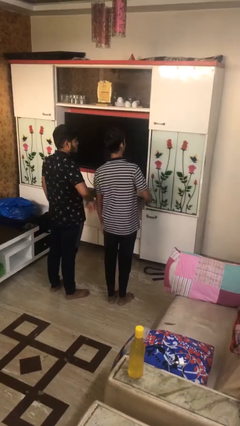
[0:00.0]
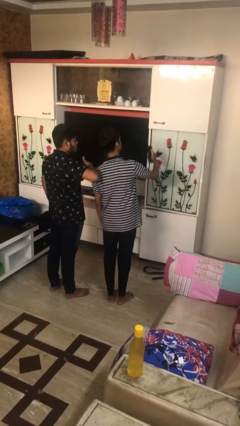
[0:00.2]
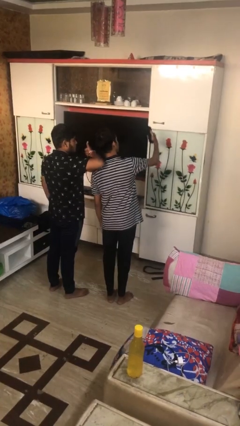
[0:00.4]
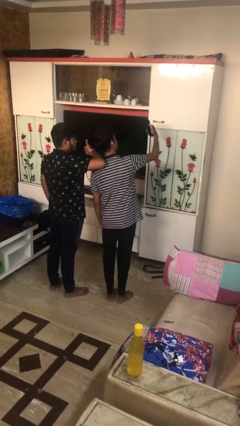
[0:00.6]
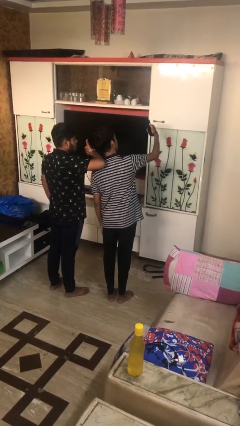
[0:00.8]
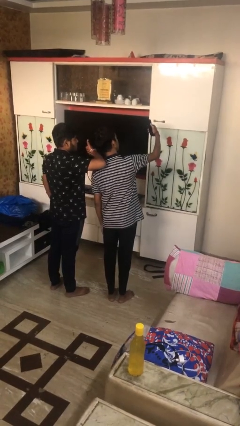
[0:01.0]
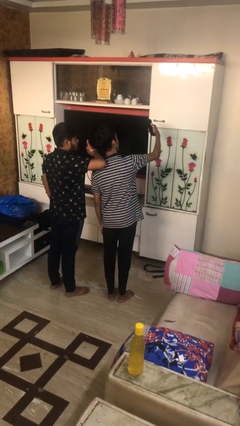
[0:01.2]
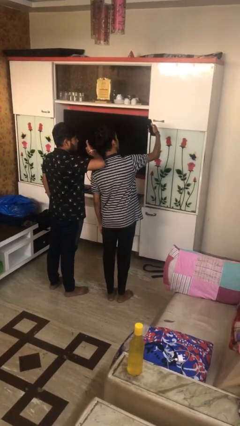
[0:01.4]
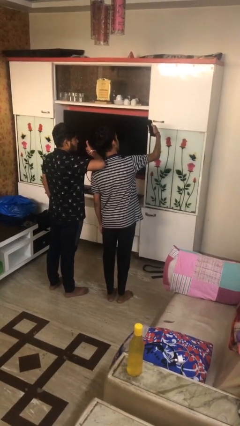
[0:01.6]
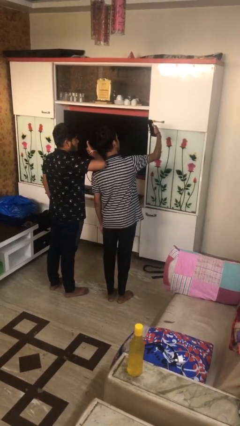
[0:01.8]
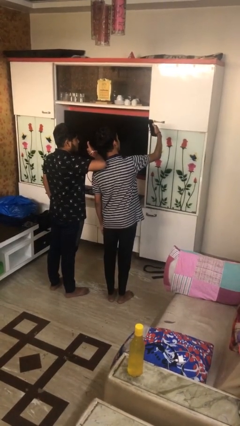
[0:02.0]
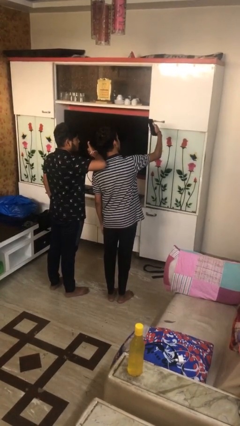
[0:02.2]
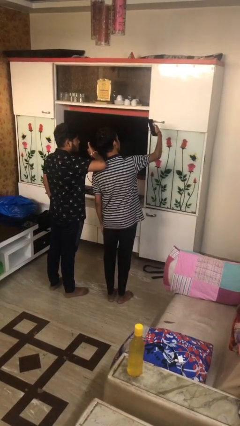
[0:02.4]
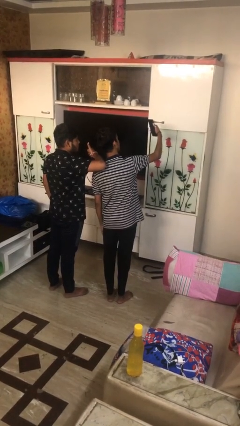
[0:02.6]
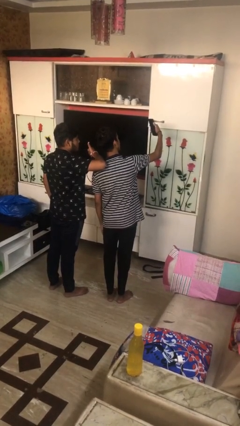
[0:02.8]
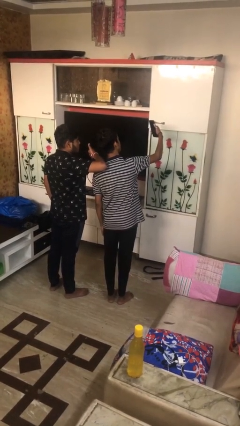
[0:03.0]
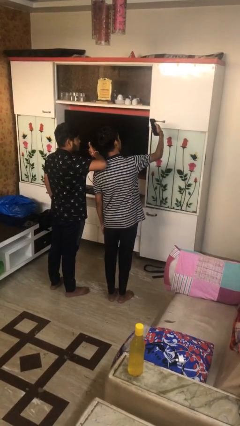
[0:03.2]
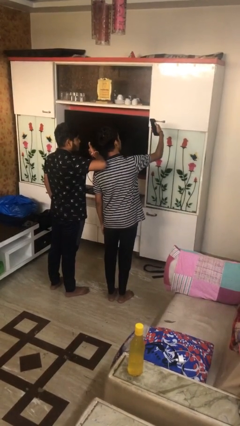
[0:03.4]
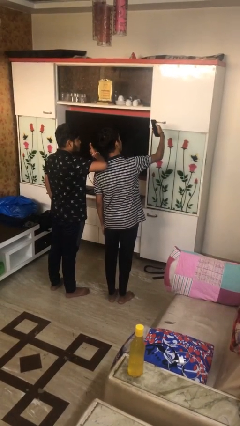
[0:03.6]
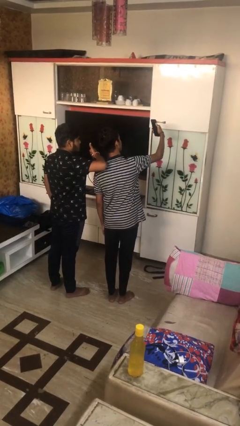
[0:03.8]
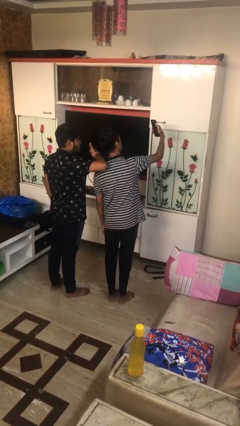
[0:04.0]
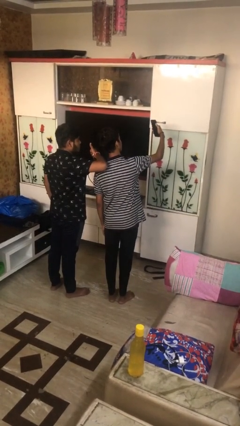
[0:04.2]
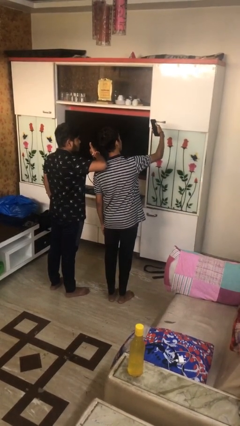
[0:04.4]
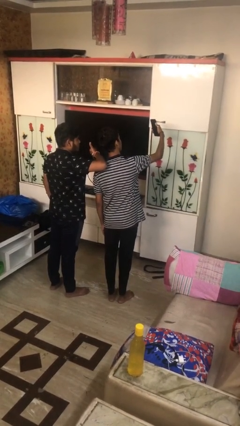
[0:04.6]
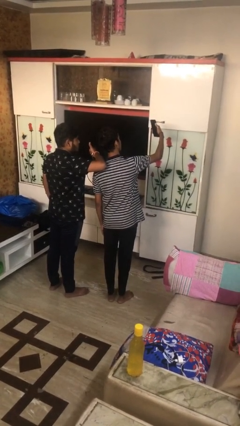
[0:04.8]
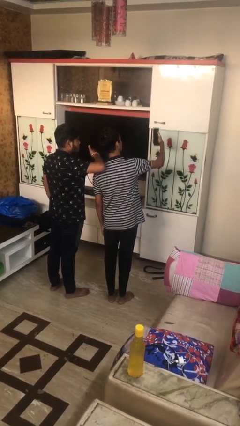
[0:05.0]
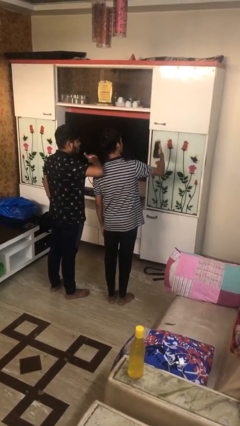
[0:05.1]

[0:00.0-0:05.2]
person takes selfie with person

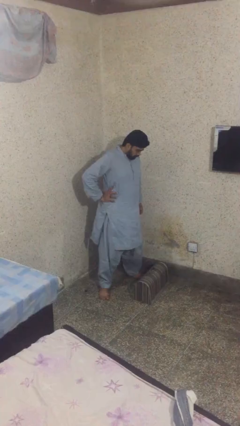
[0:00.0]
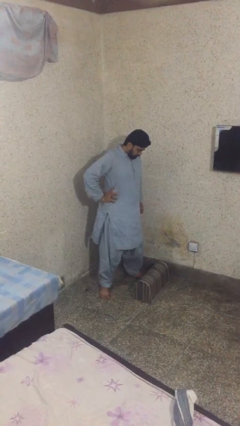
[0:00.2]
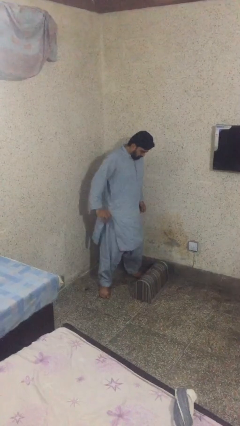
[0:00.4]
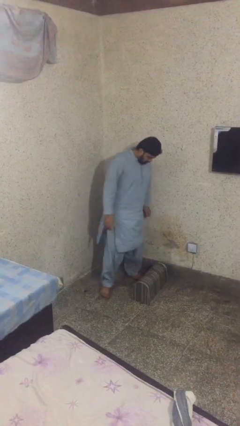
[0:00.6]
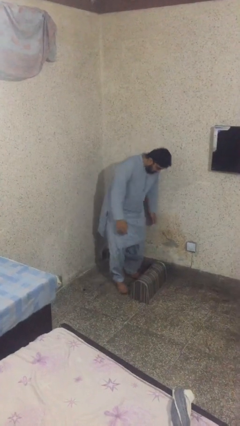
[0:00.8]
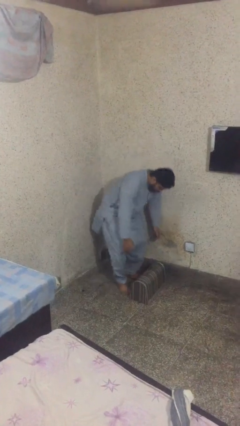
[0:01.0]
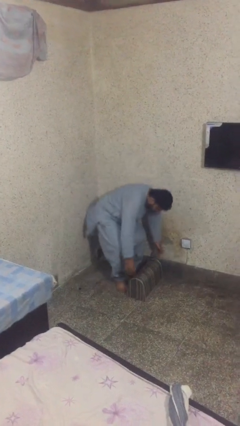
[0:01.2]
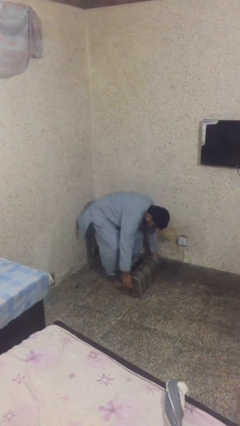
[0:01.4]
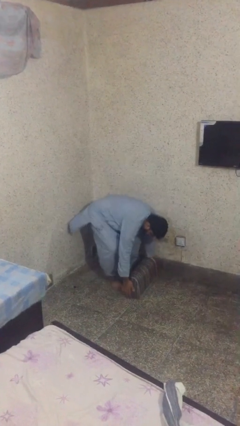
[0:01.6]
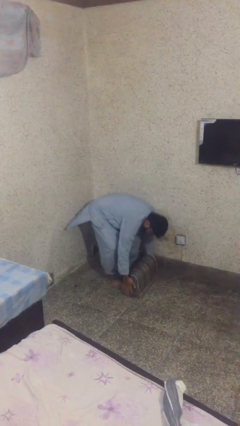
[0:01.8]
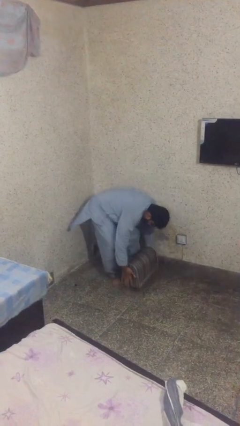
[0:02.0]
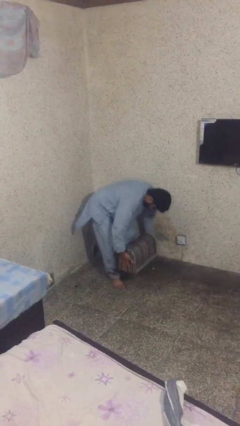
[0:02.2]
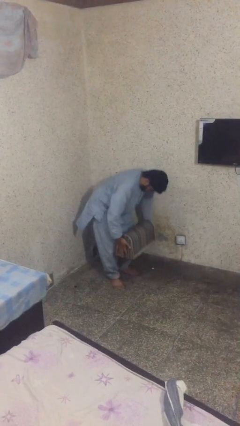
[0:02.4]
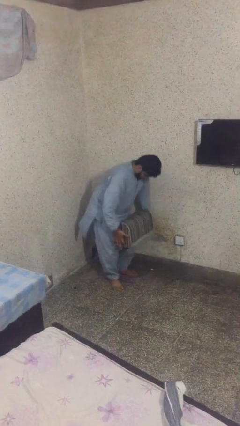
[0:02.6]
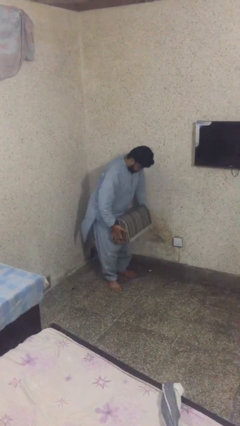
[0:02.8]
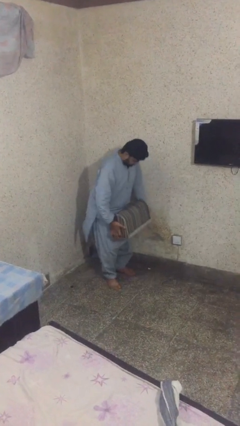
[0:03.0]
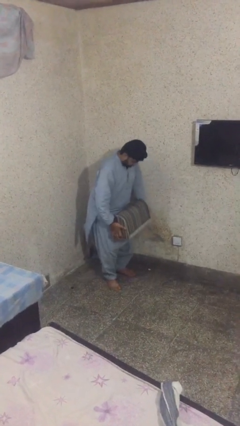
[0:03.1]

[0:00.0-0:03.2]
person picks up object from floor

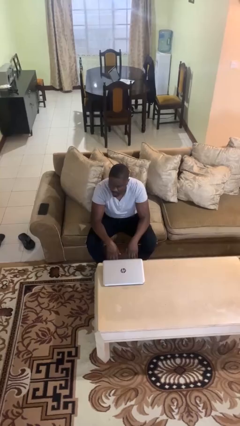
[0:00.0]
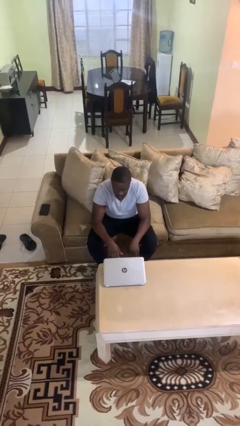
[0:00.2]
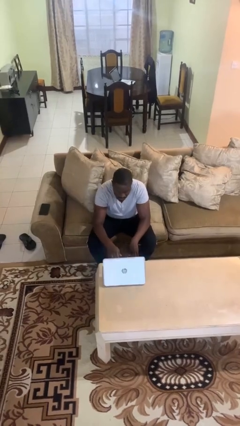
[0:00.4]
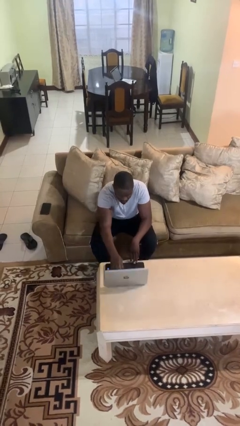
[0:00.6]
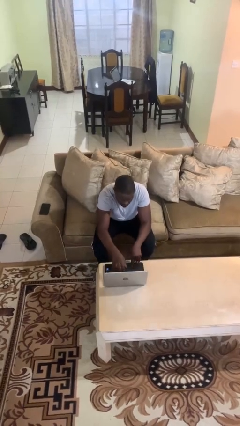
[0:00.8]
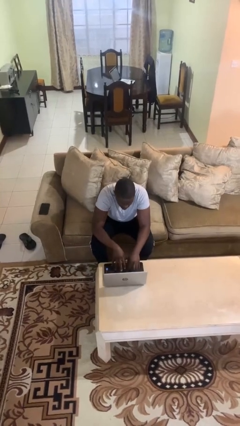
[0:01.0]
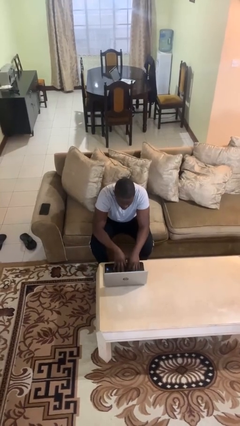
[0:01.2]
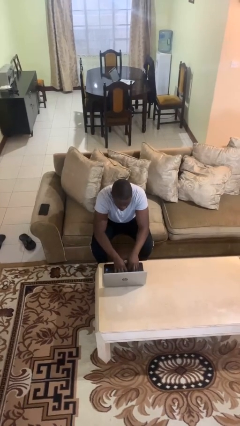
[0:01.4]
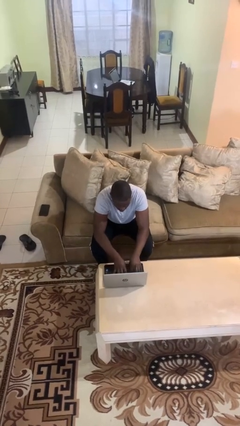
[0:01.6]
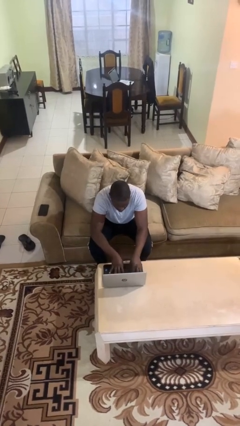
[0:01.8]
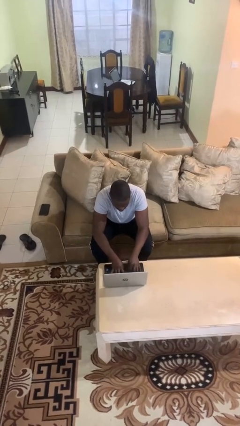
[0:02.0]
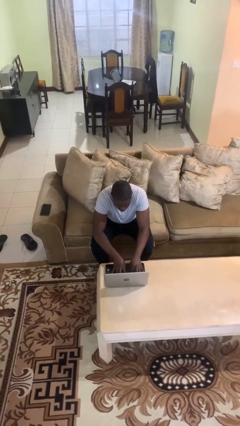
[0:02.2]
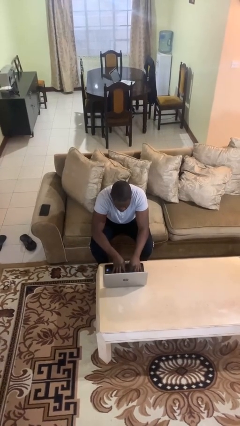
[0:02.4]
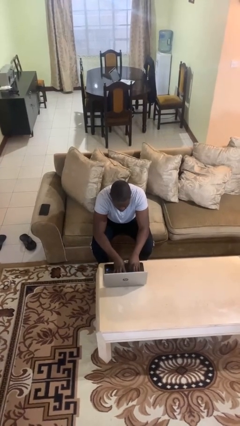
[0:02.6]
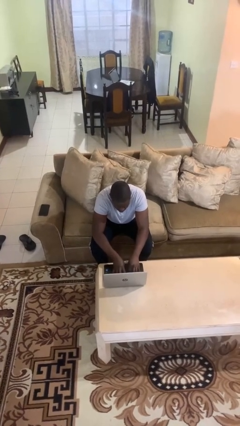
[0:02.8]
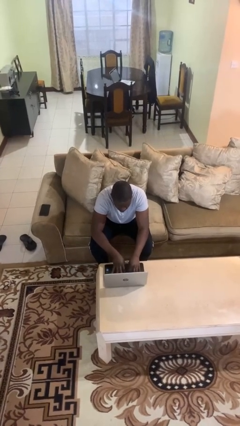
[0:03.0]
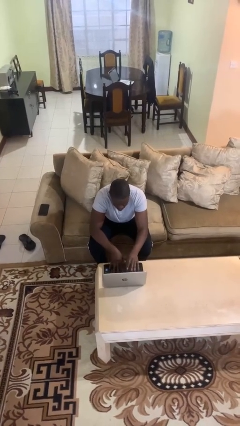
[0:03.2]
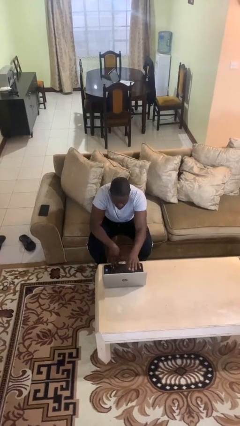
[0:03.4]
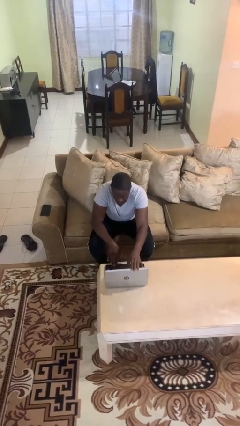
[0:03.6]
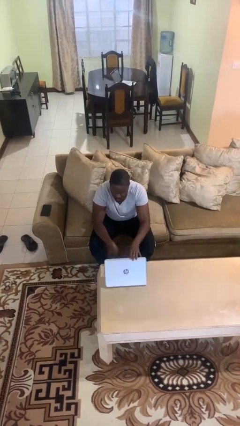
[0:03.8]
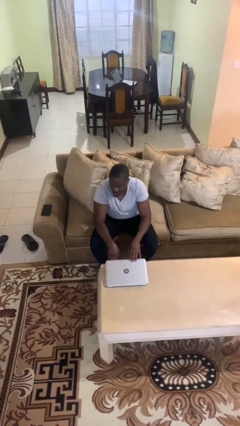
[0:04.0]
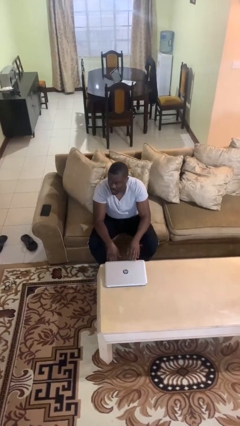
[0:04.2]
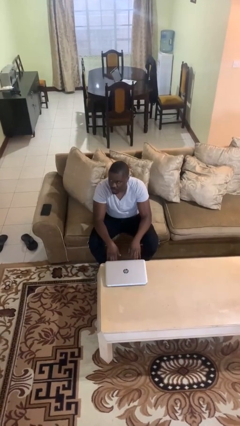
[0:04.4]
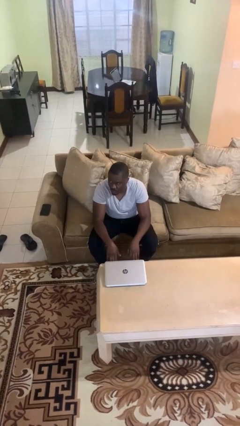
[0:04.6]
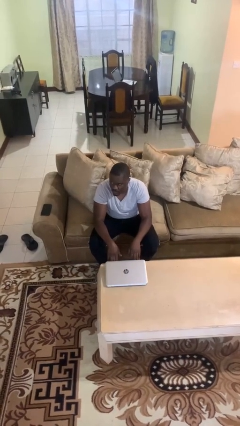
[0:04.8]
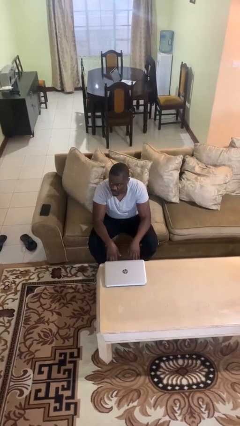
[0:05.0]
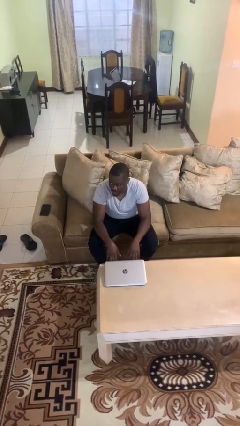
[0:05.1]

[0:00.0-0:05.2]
person interacts with laptop

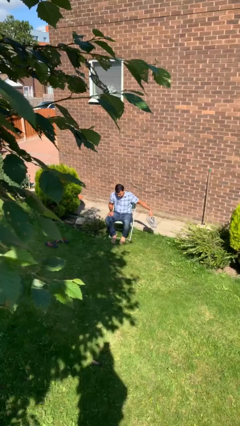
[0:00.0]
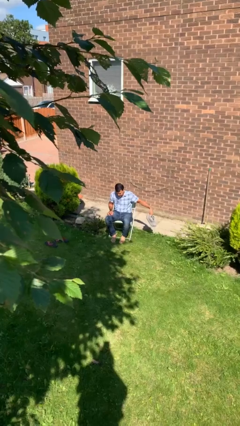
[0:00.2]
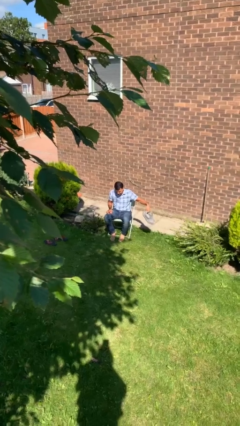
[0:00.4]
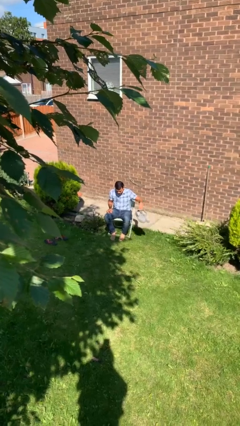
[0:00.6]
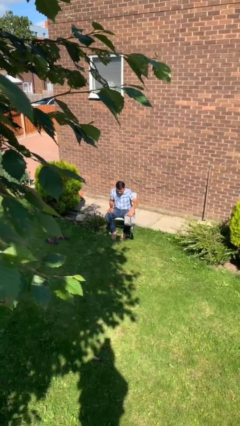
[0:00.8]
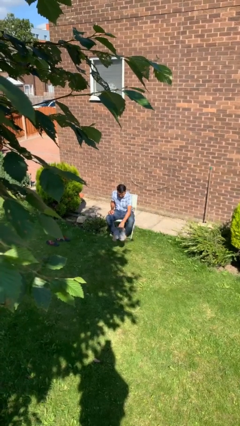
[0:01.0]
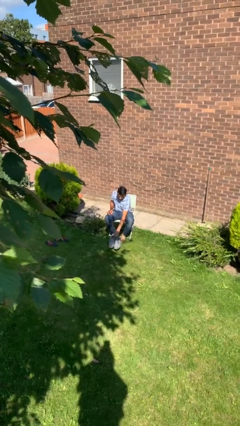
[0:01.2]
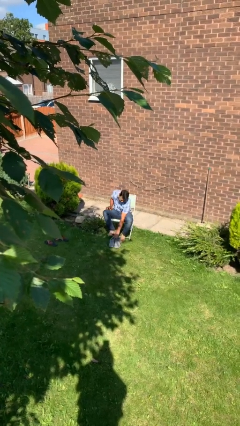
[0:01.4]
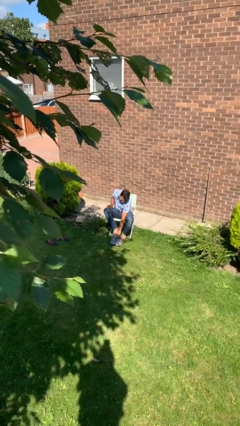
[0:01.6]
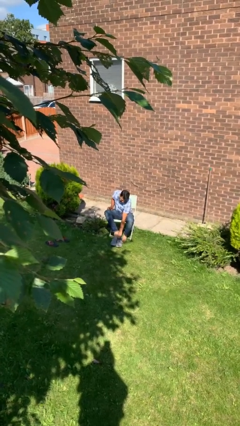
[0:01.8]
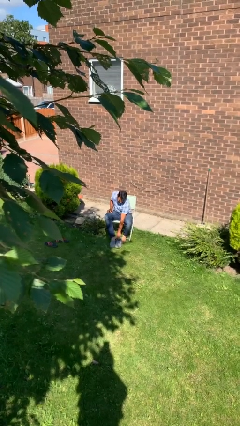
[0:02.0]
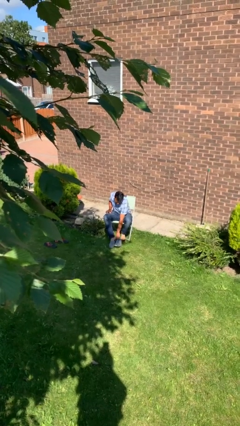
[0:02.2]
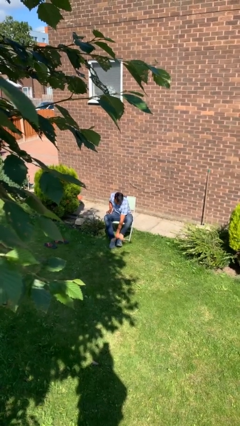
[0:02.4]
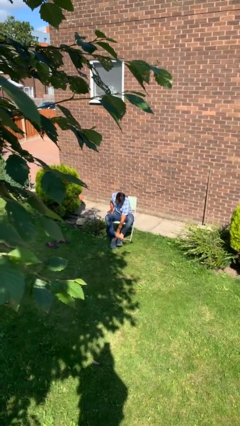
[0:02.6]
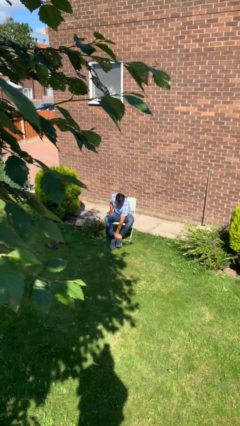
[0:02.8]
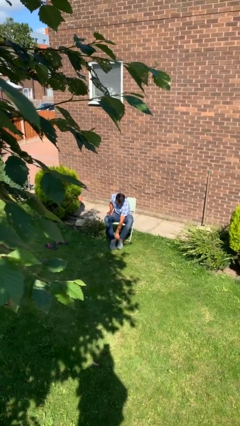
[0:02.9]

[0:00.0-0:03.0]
person puts on shoes

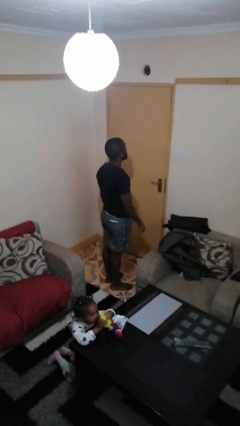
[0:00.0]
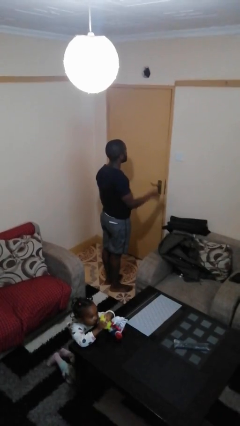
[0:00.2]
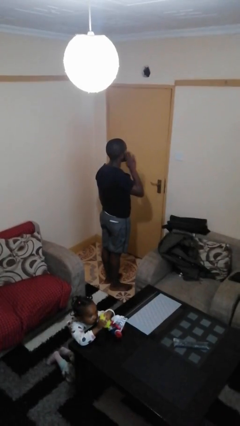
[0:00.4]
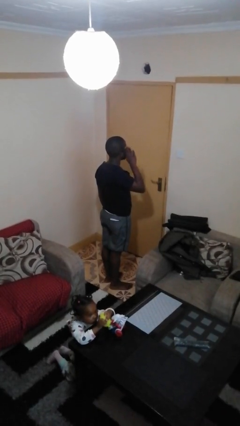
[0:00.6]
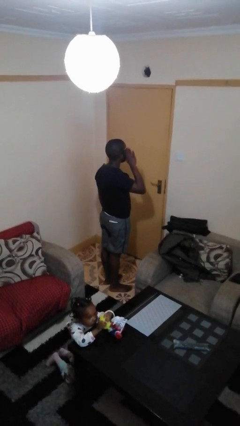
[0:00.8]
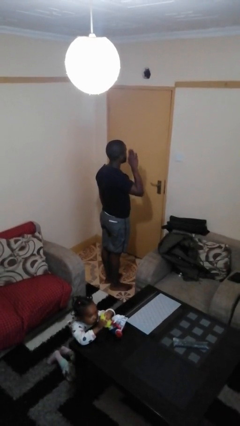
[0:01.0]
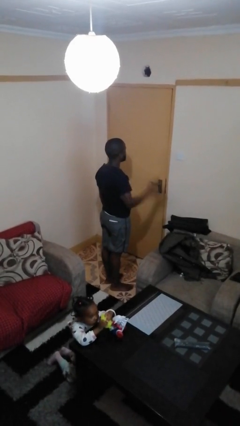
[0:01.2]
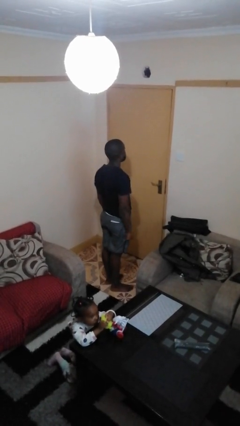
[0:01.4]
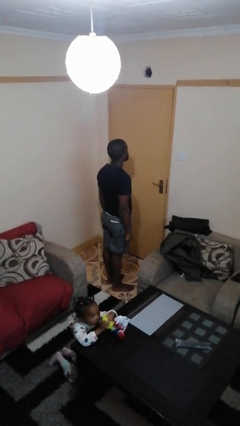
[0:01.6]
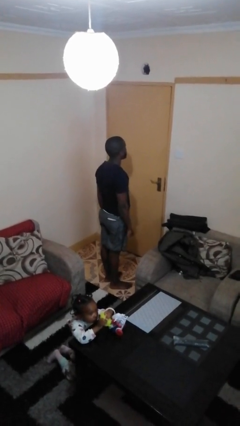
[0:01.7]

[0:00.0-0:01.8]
person salutes
